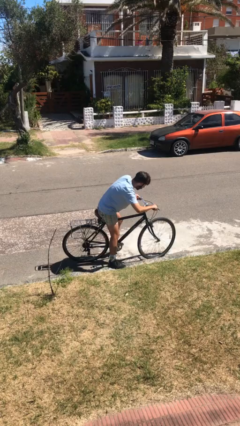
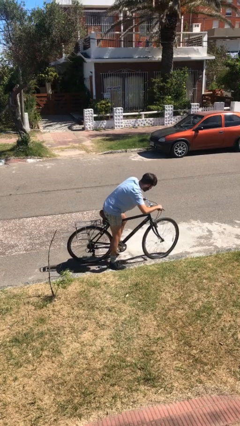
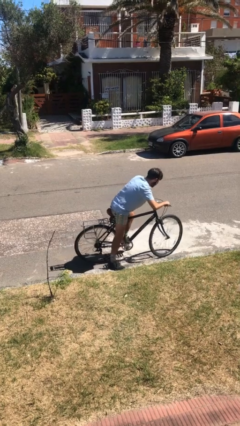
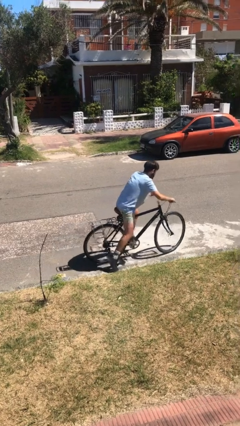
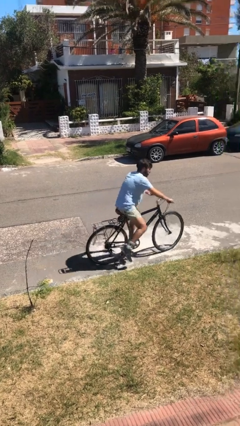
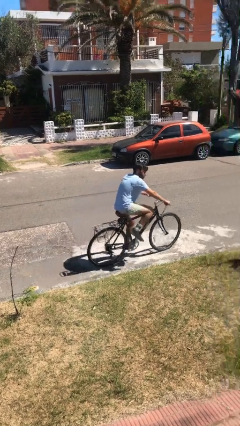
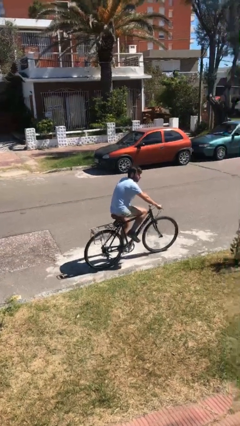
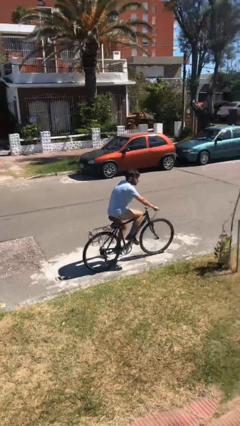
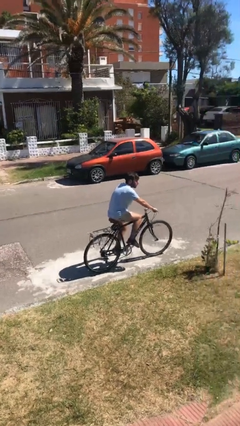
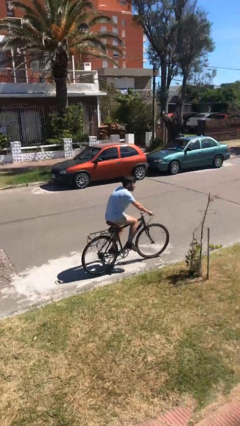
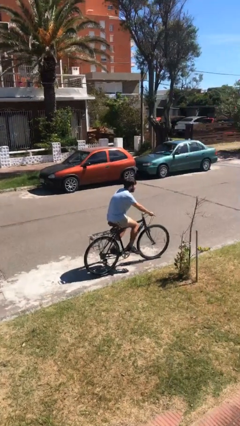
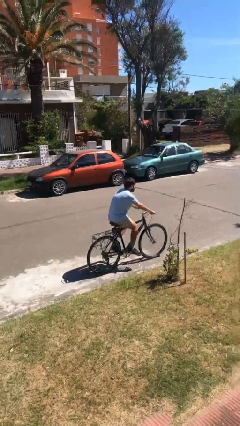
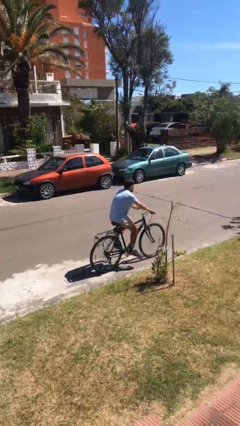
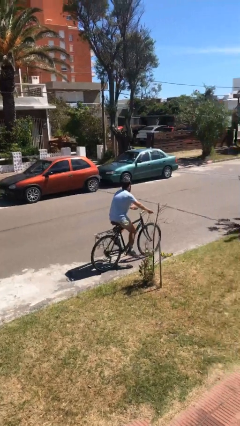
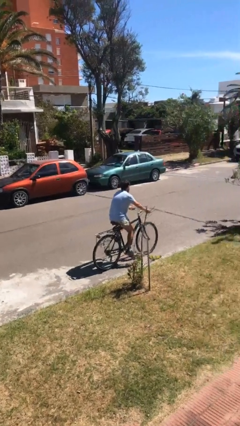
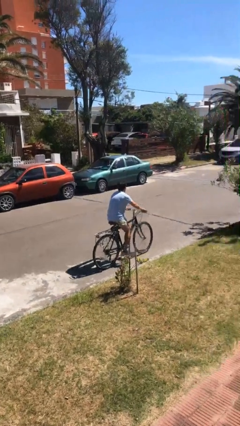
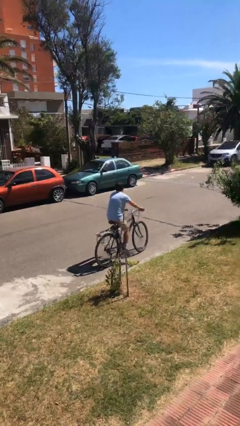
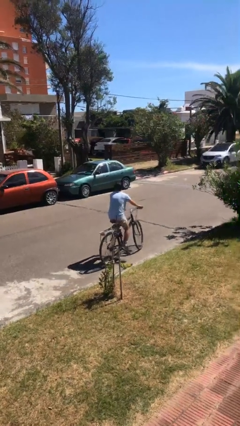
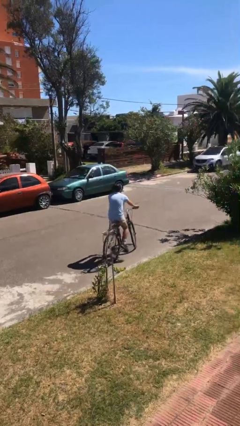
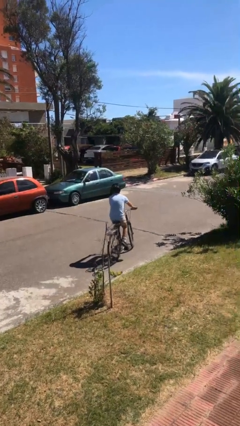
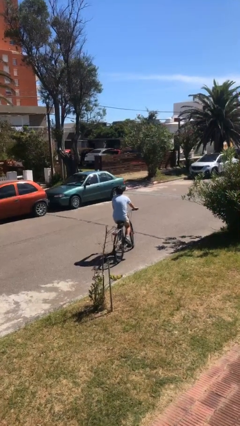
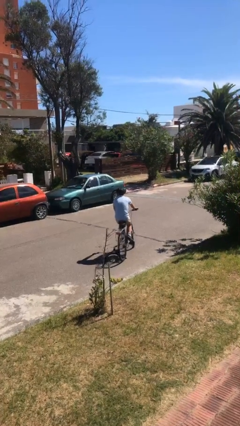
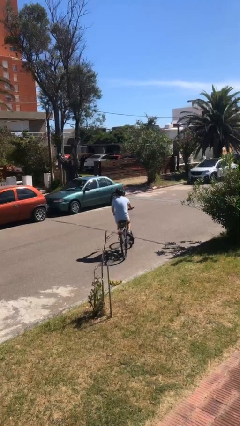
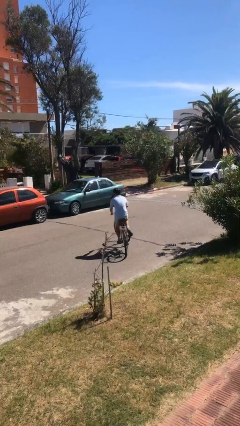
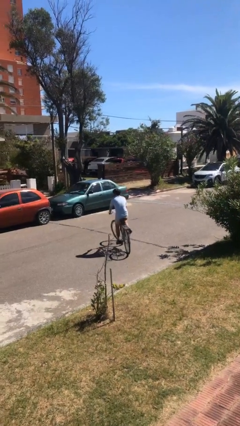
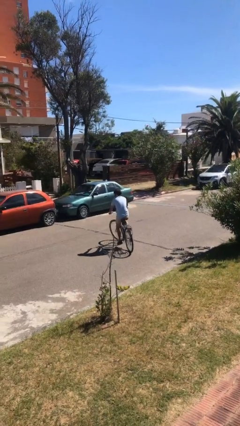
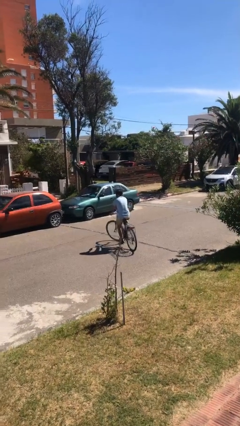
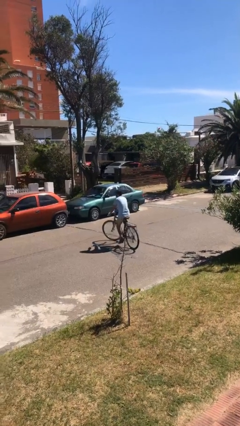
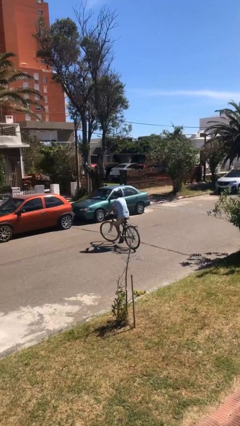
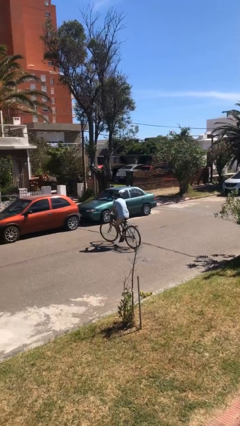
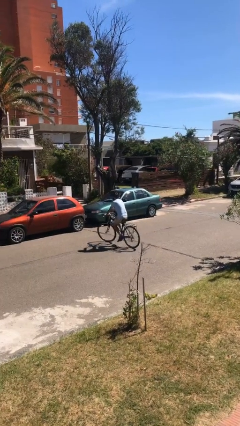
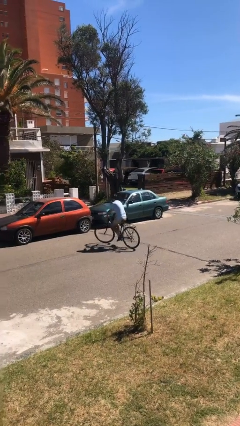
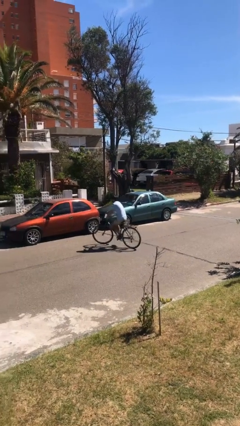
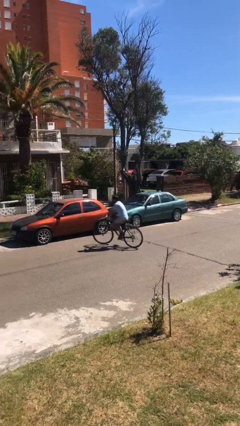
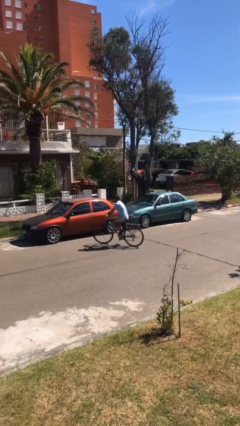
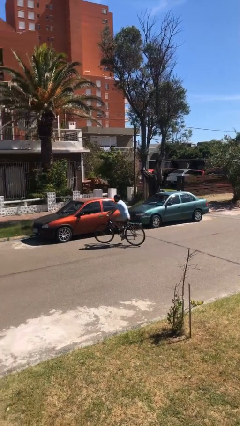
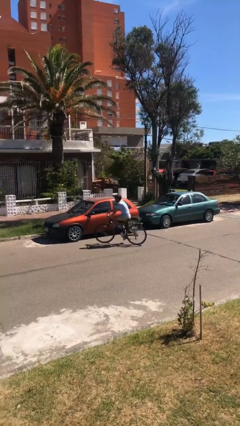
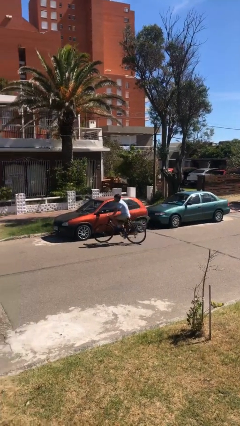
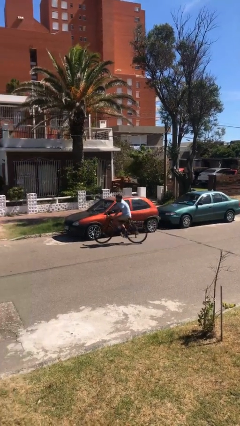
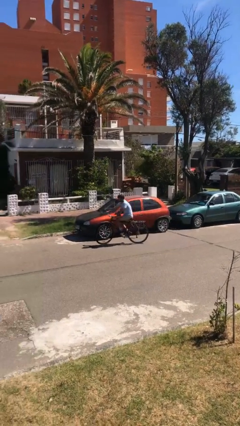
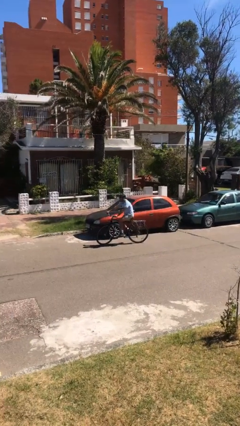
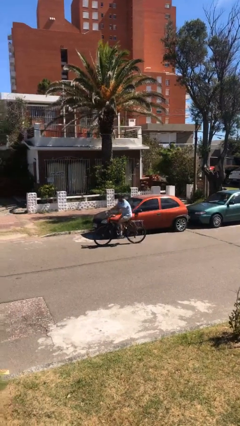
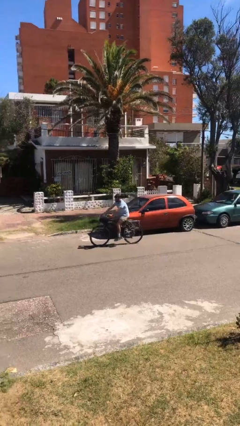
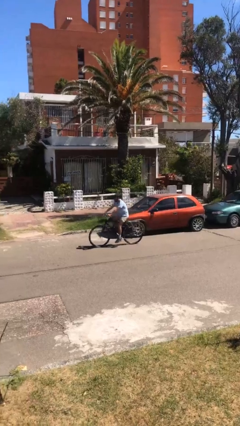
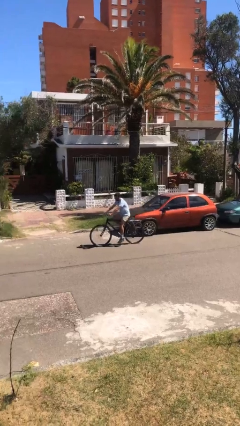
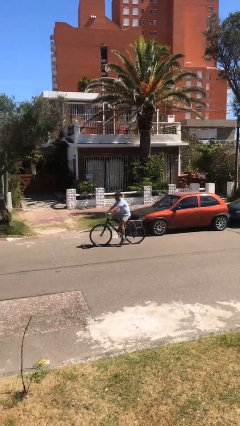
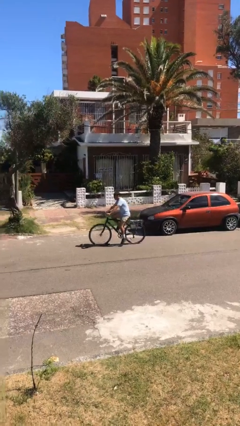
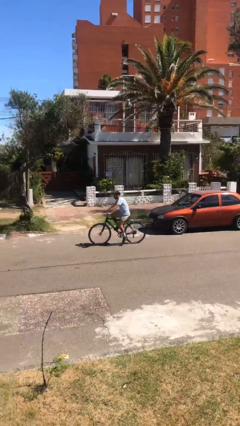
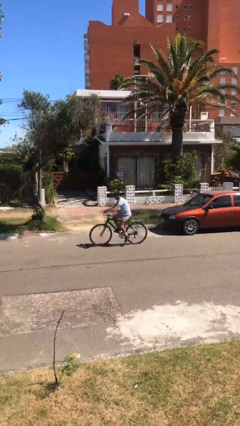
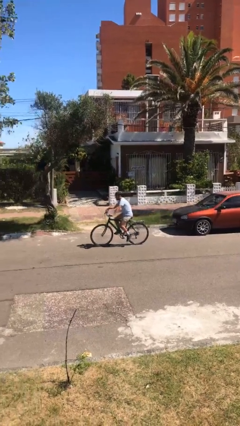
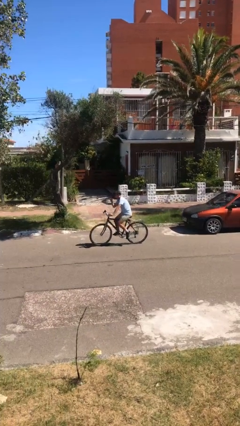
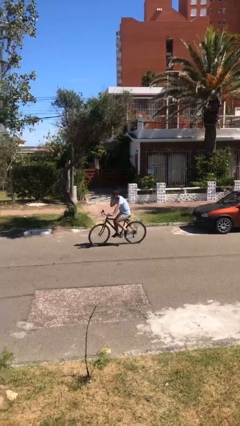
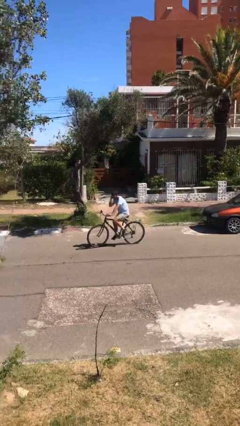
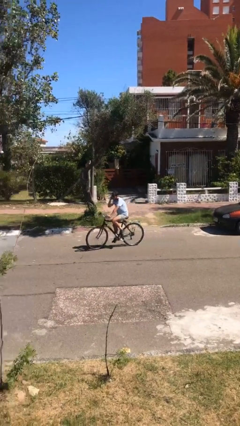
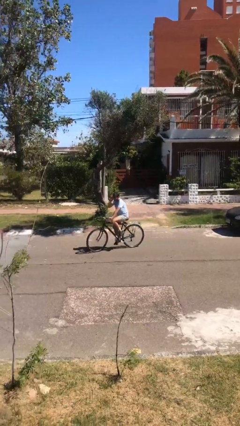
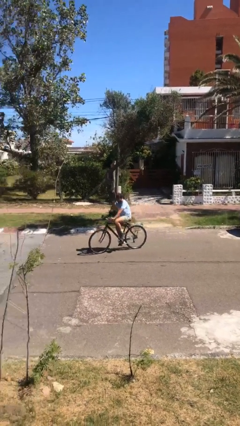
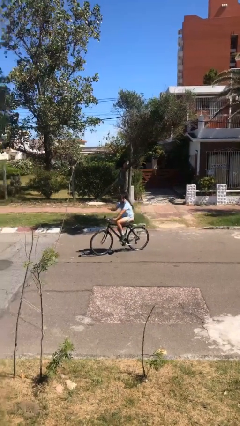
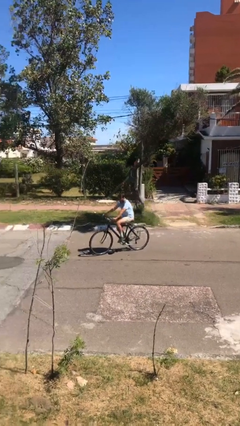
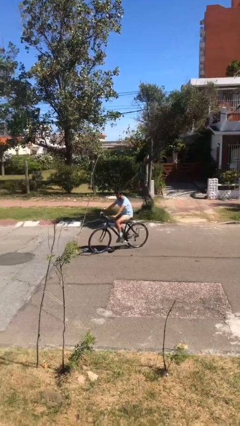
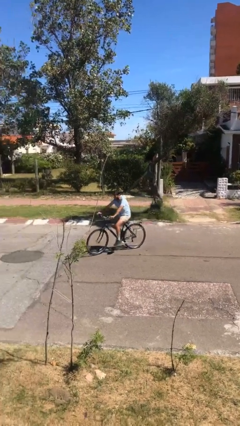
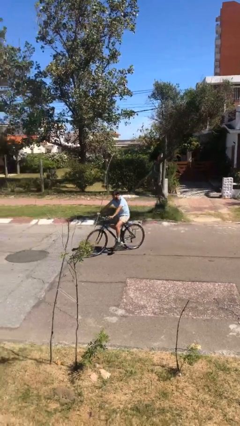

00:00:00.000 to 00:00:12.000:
person rides bicycle

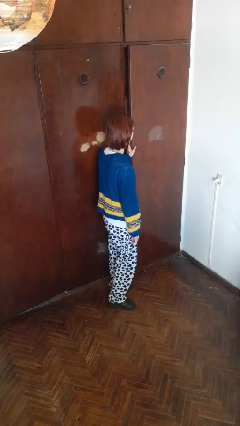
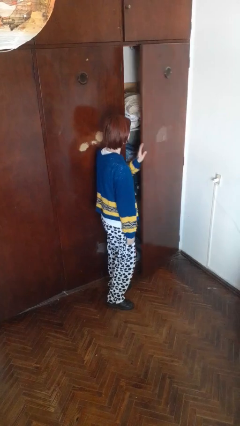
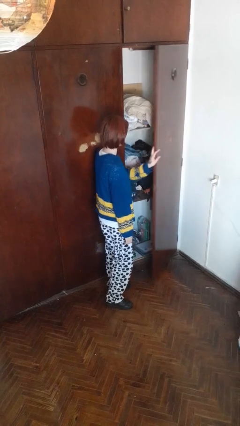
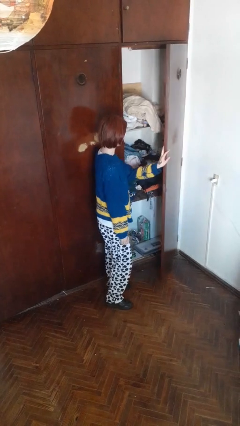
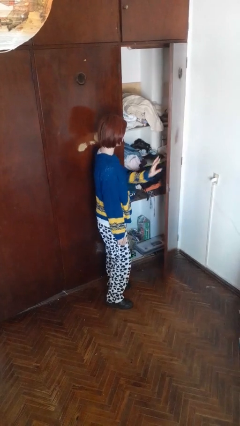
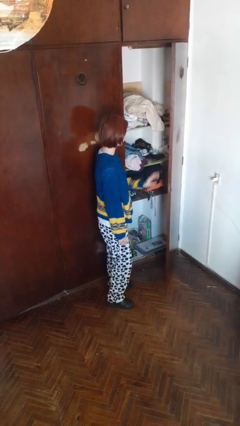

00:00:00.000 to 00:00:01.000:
person opens closet door

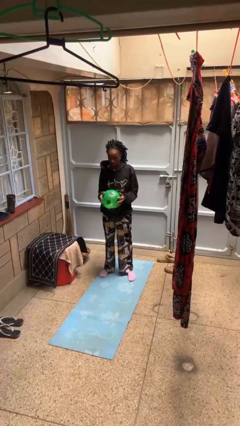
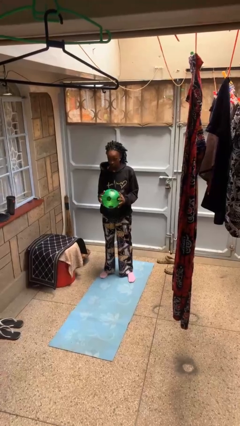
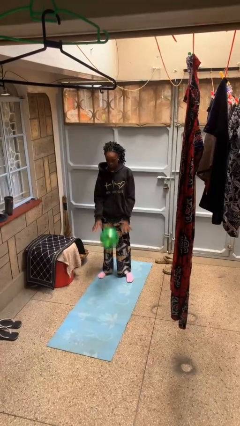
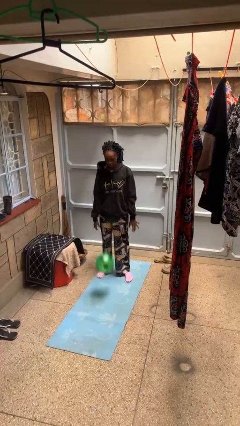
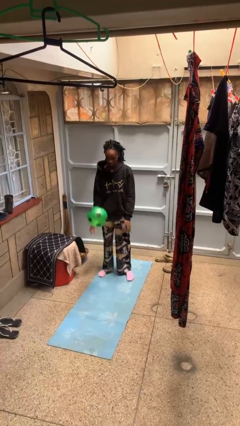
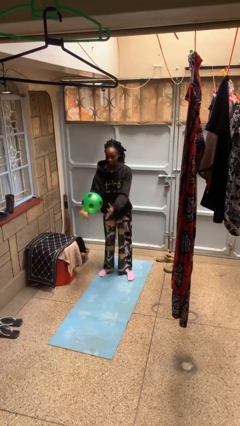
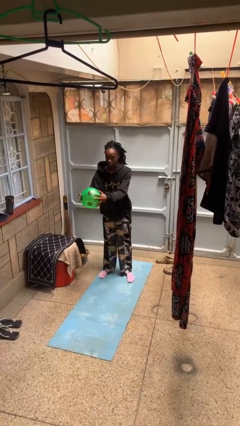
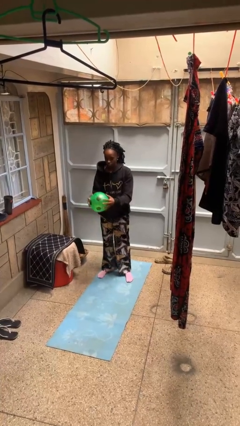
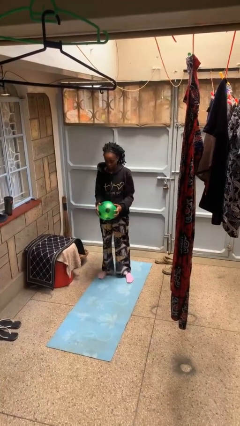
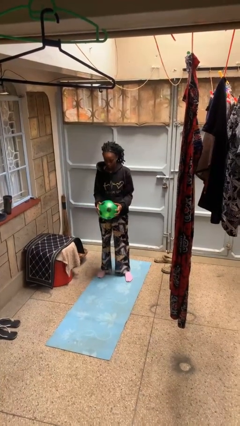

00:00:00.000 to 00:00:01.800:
person bounces ball on floor

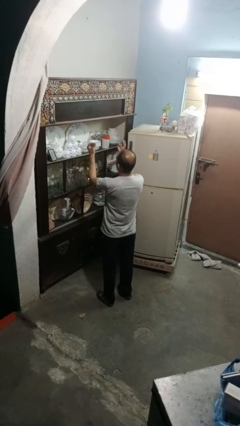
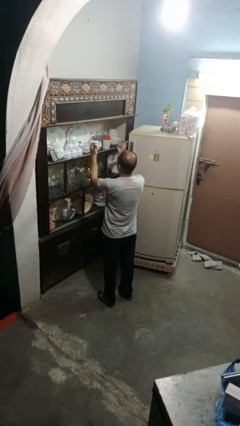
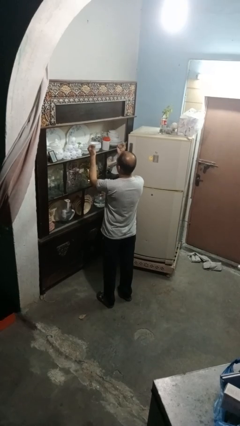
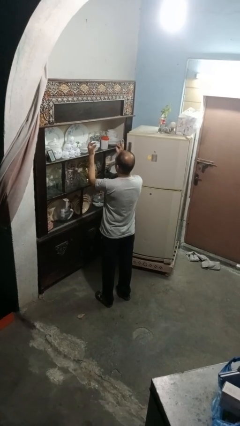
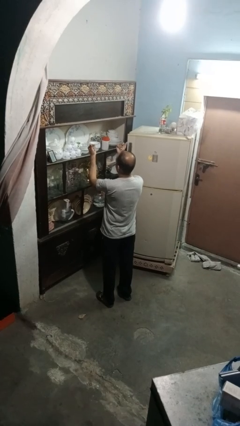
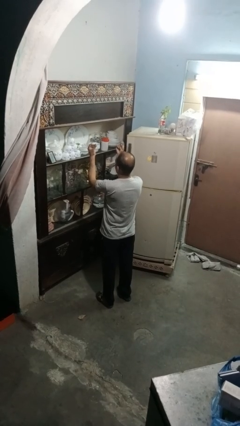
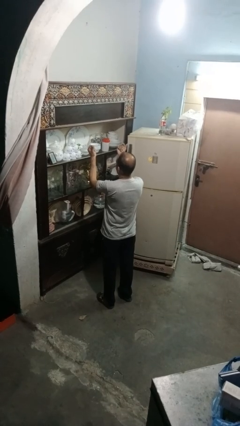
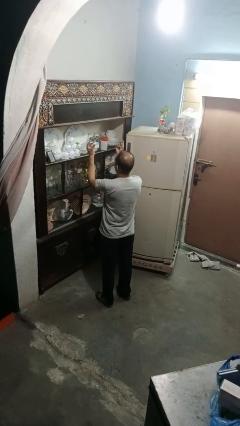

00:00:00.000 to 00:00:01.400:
person snaps fingers

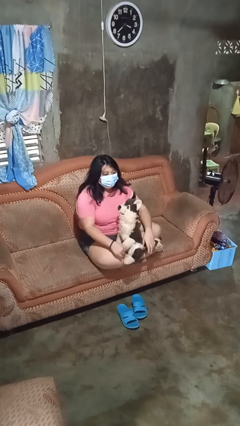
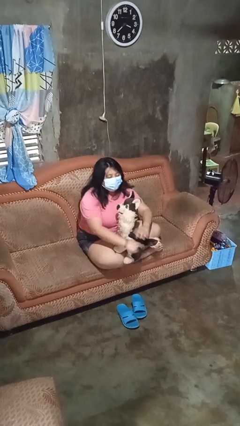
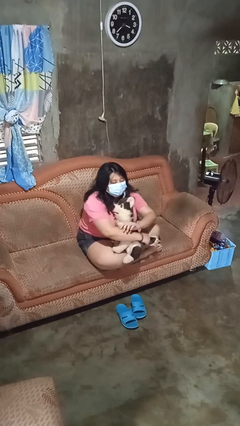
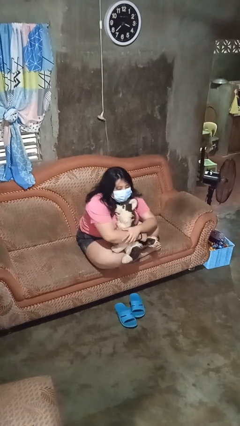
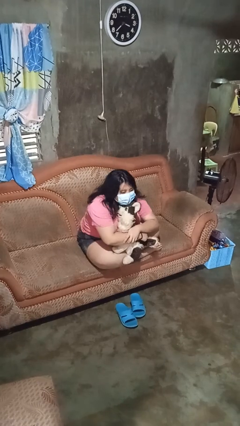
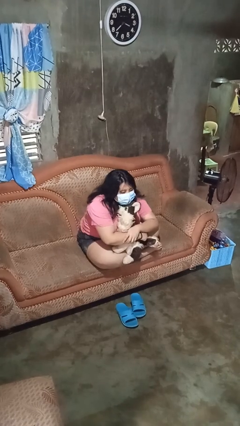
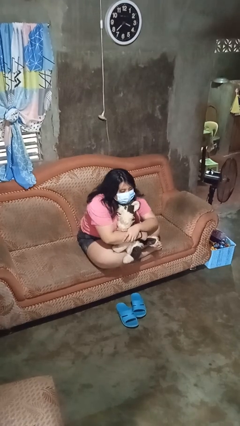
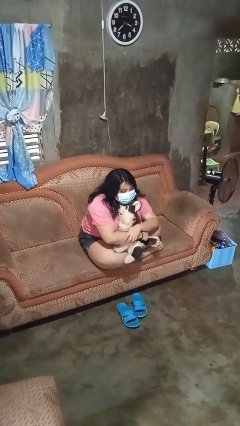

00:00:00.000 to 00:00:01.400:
person hugs stuffed animal
